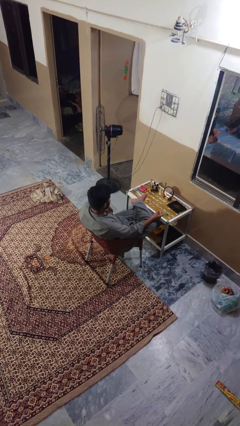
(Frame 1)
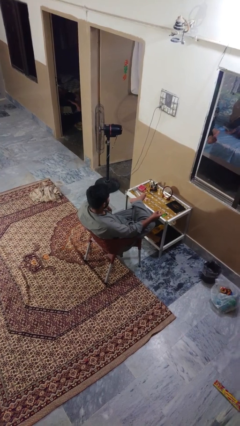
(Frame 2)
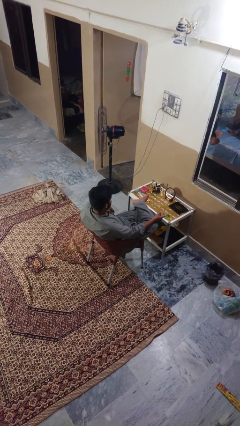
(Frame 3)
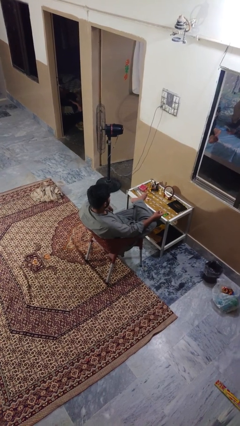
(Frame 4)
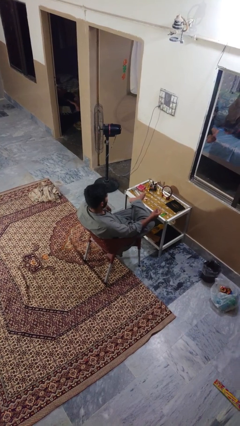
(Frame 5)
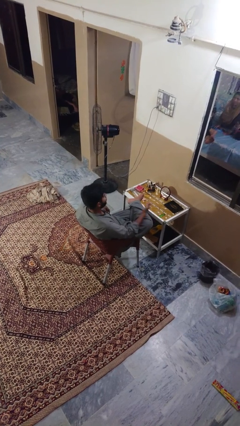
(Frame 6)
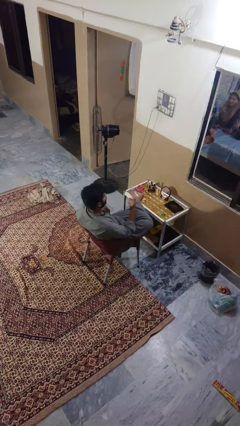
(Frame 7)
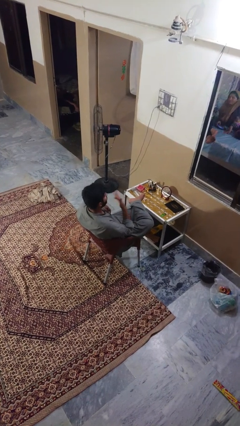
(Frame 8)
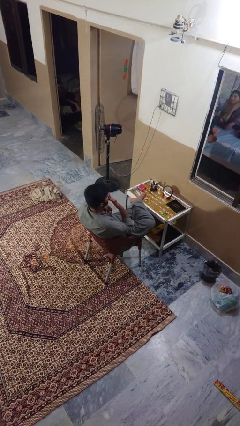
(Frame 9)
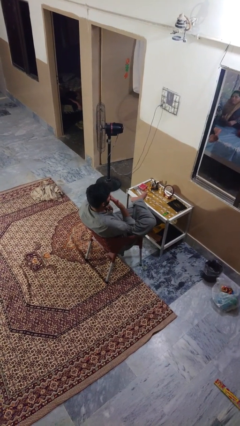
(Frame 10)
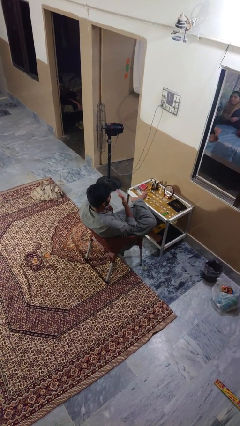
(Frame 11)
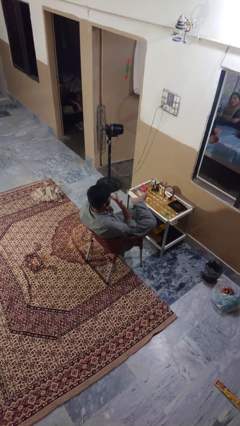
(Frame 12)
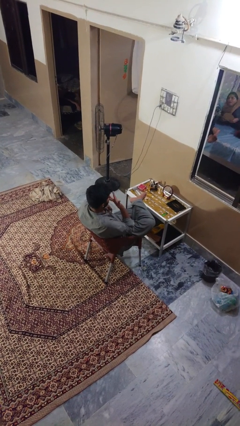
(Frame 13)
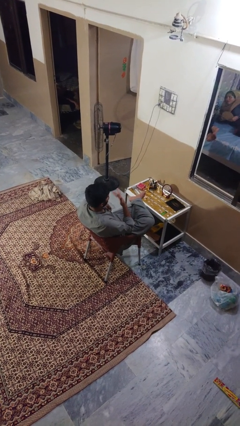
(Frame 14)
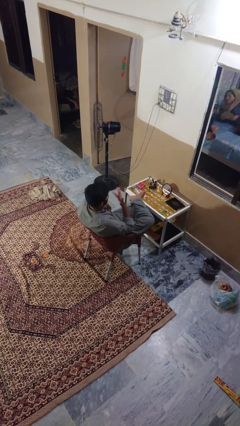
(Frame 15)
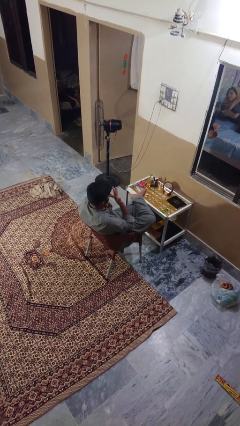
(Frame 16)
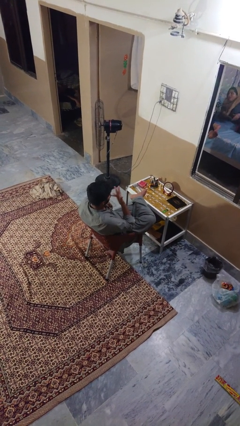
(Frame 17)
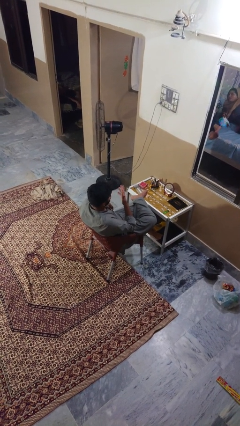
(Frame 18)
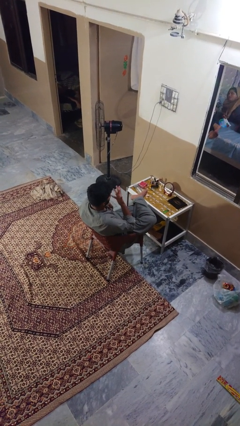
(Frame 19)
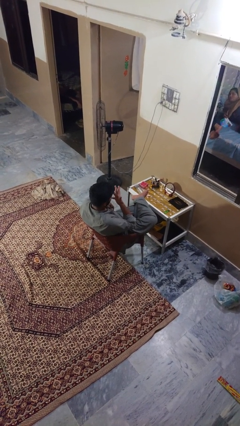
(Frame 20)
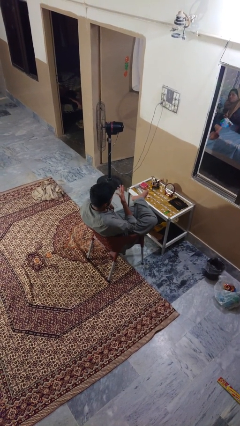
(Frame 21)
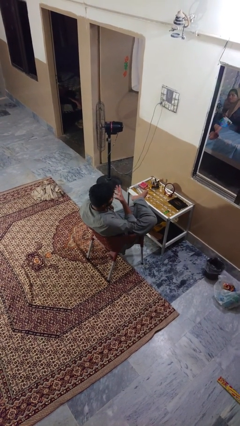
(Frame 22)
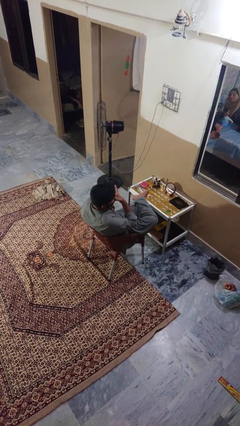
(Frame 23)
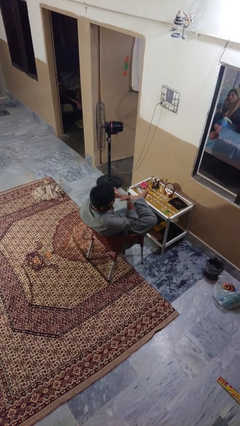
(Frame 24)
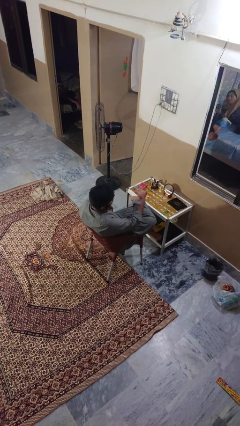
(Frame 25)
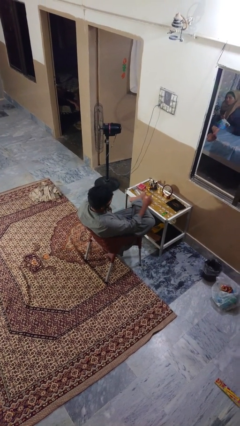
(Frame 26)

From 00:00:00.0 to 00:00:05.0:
person licks fingers

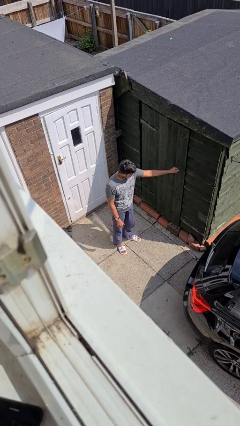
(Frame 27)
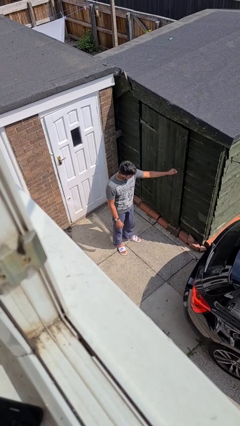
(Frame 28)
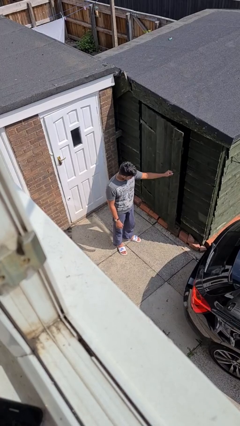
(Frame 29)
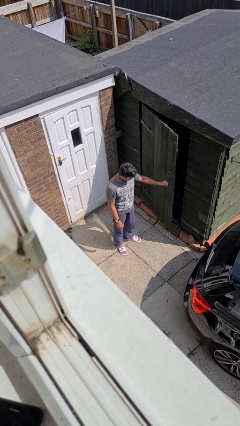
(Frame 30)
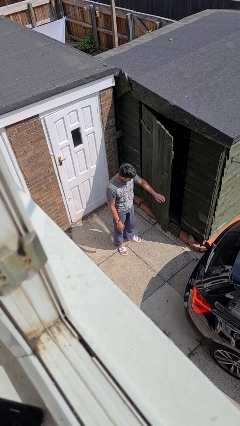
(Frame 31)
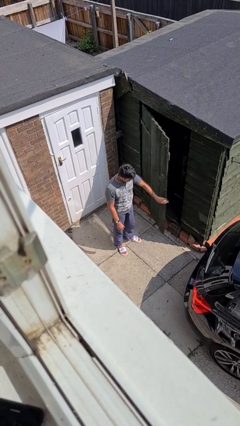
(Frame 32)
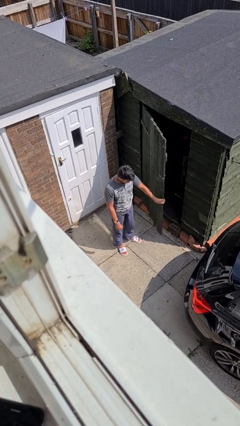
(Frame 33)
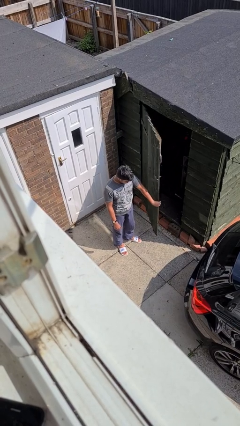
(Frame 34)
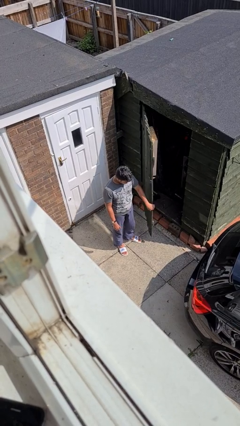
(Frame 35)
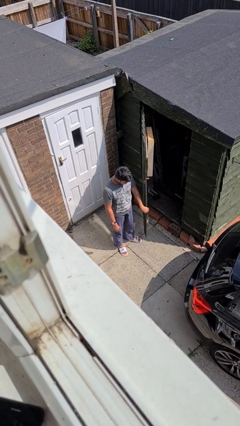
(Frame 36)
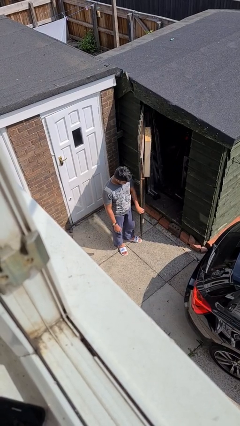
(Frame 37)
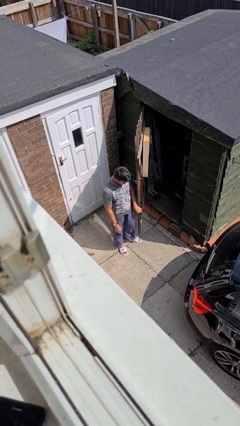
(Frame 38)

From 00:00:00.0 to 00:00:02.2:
person opens facility door

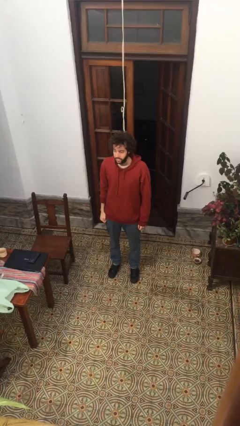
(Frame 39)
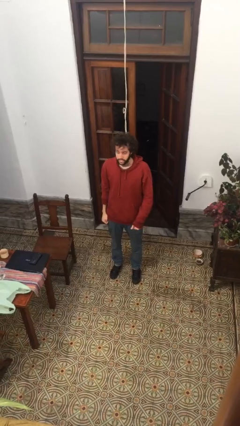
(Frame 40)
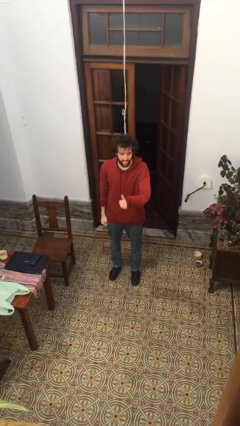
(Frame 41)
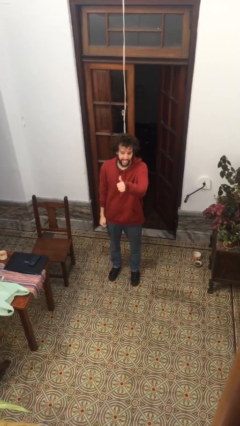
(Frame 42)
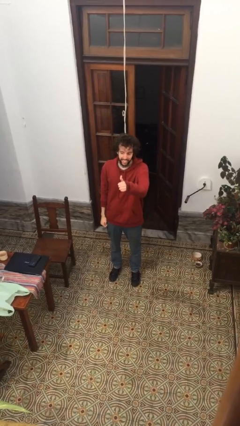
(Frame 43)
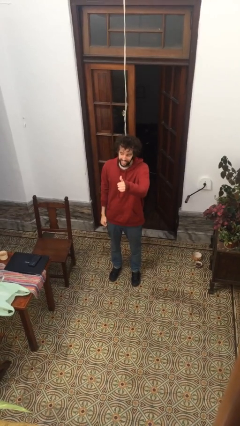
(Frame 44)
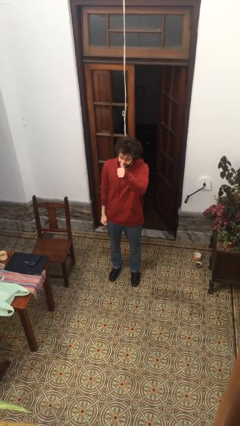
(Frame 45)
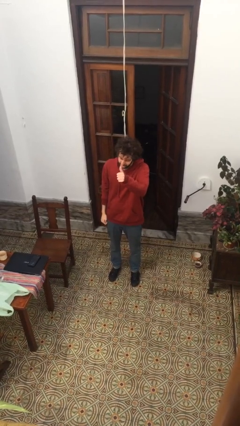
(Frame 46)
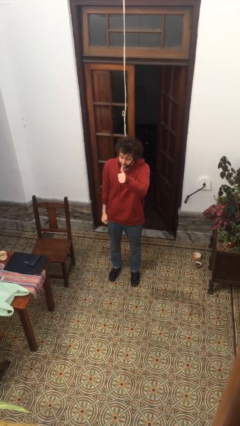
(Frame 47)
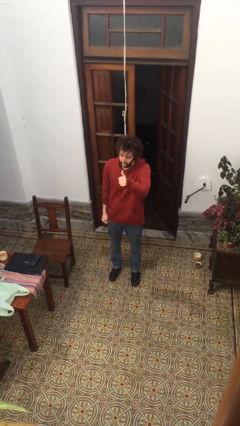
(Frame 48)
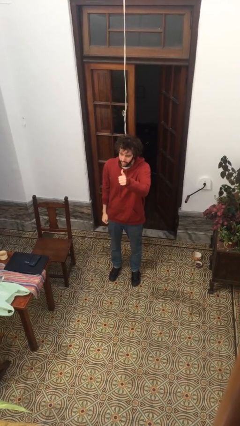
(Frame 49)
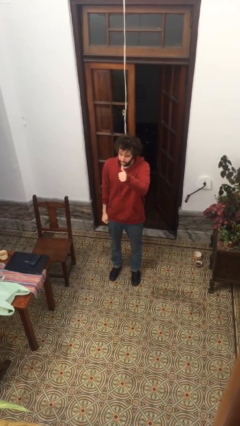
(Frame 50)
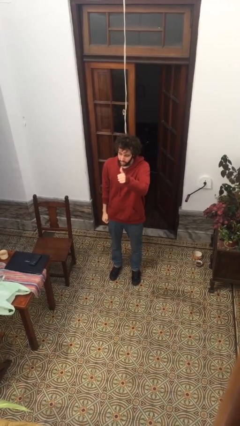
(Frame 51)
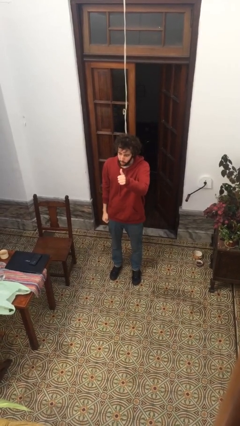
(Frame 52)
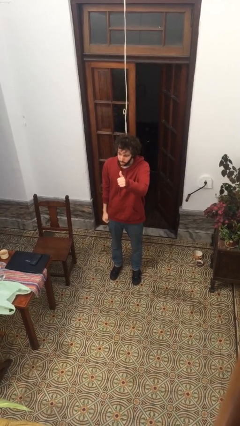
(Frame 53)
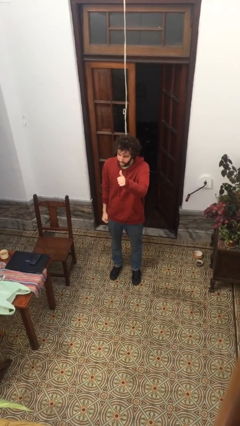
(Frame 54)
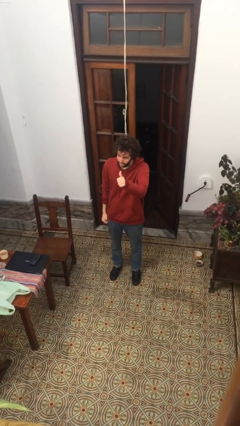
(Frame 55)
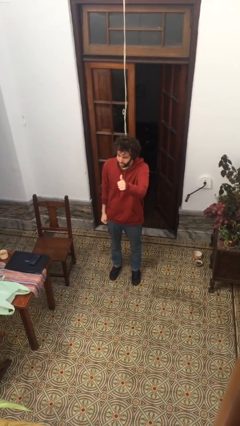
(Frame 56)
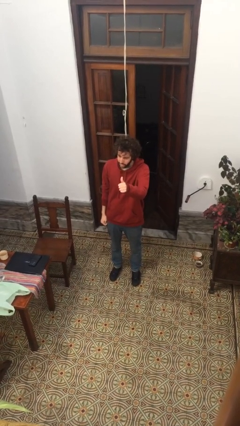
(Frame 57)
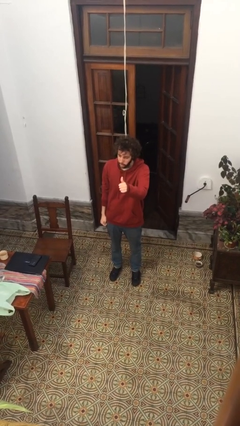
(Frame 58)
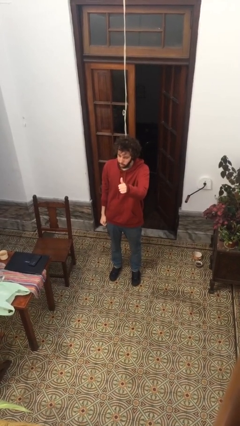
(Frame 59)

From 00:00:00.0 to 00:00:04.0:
person gestures thumbs up

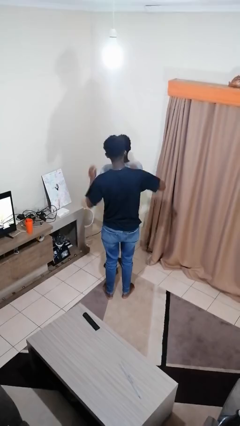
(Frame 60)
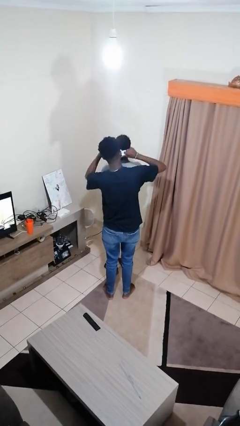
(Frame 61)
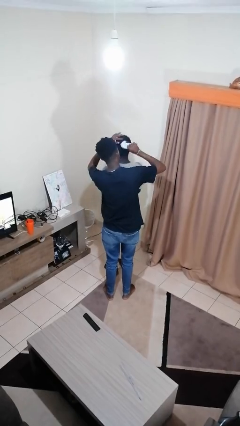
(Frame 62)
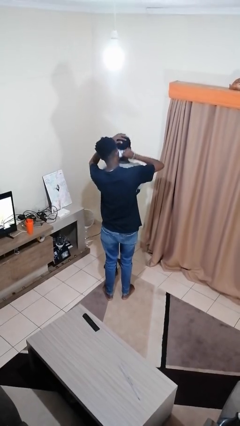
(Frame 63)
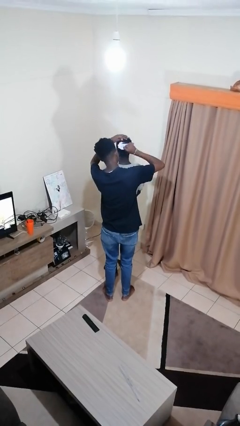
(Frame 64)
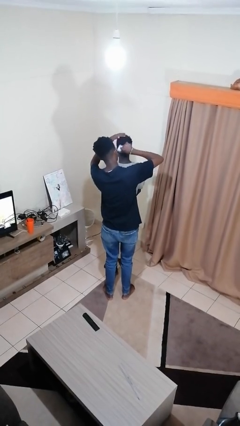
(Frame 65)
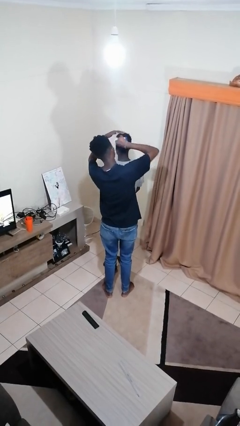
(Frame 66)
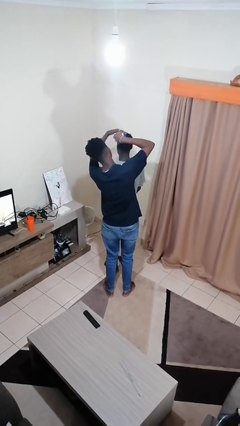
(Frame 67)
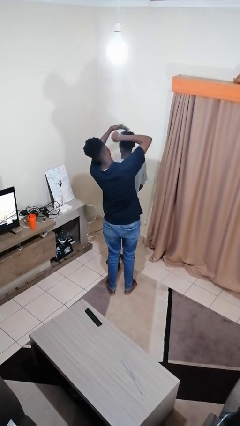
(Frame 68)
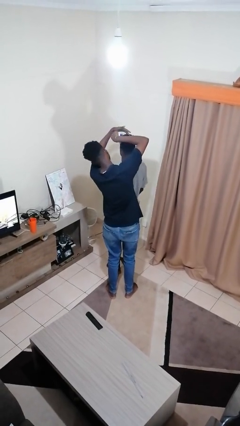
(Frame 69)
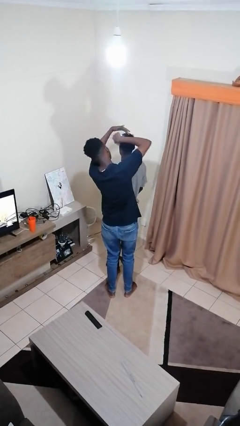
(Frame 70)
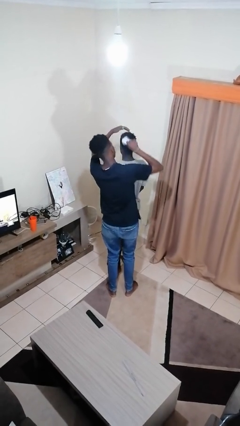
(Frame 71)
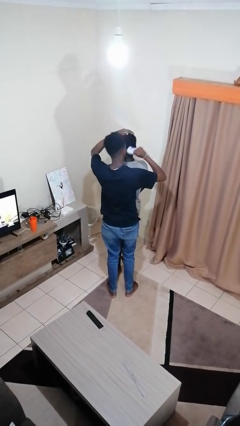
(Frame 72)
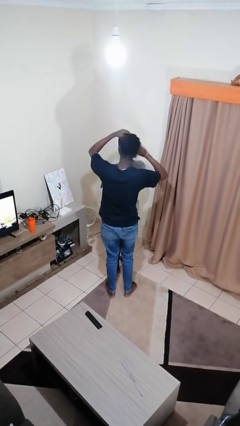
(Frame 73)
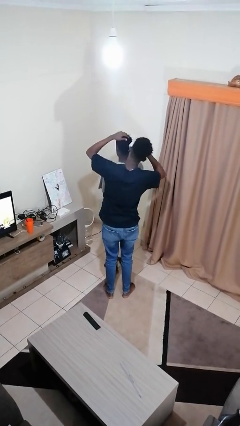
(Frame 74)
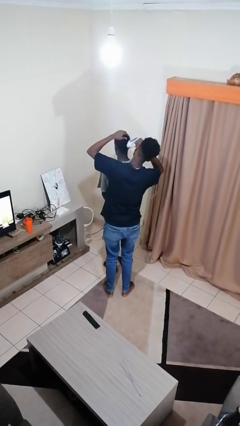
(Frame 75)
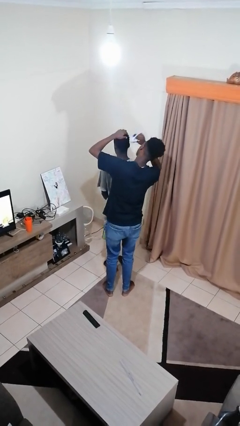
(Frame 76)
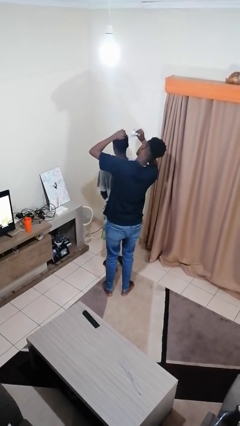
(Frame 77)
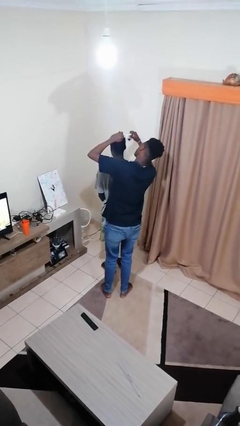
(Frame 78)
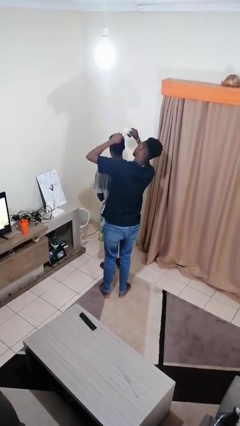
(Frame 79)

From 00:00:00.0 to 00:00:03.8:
person brushes hair of person

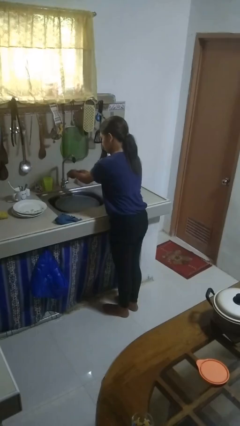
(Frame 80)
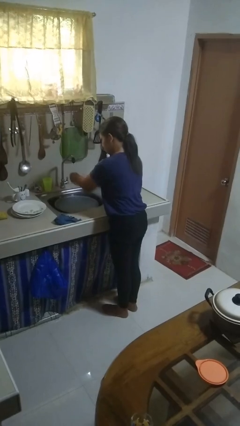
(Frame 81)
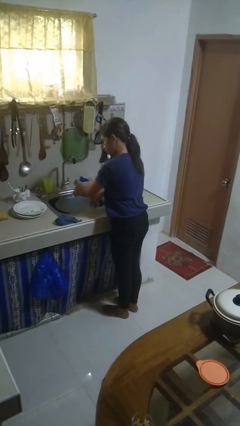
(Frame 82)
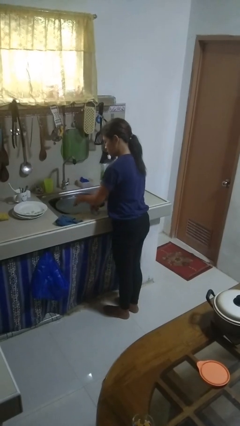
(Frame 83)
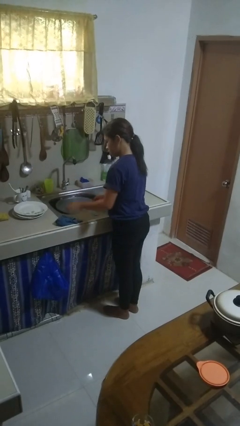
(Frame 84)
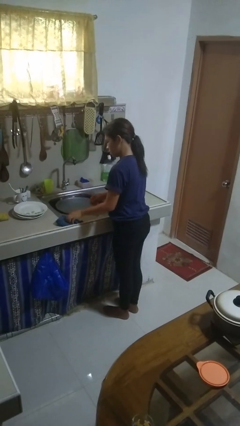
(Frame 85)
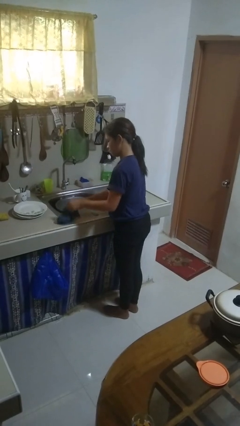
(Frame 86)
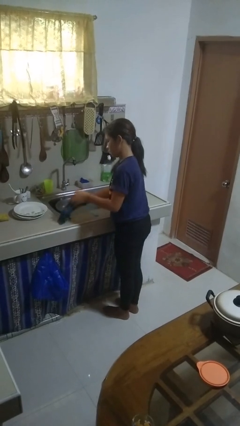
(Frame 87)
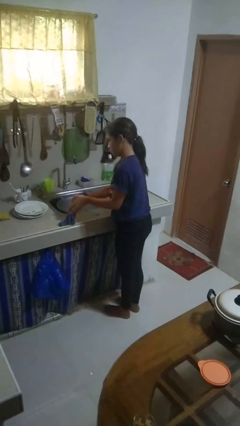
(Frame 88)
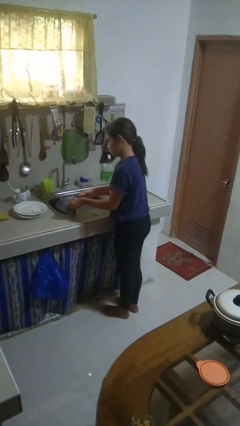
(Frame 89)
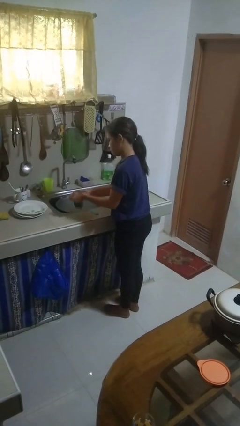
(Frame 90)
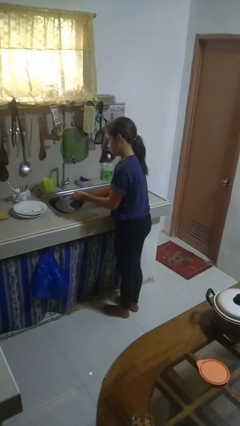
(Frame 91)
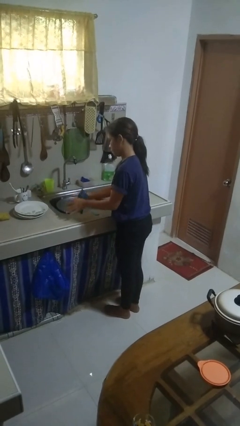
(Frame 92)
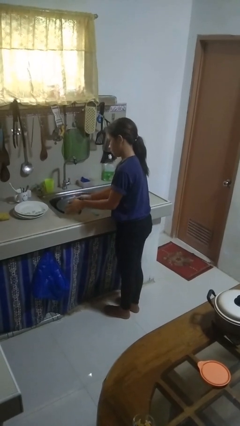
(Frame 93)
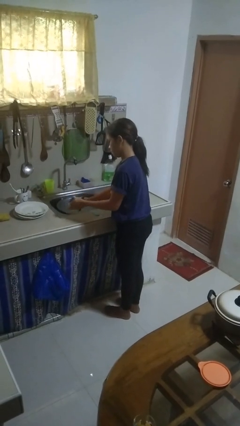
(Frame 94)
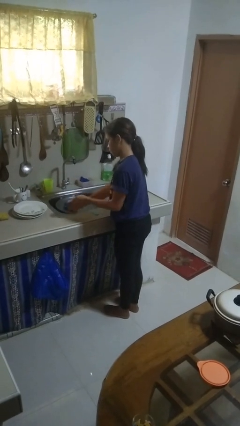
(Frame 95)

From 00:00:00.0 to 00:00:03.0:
person dries hands with towel
